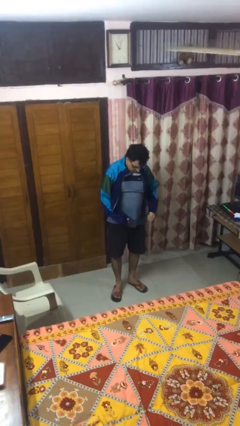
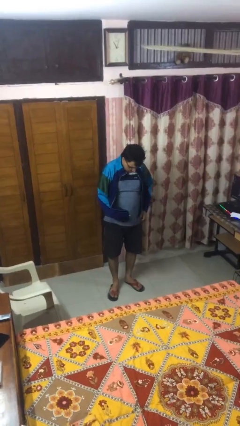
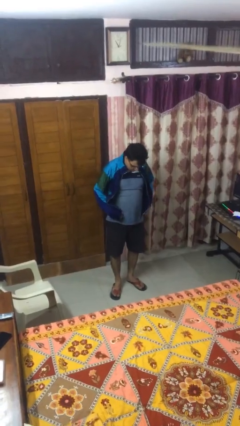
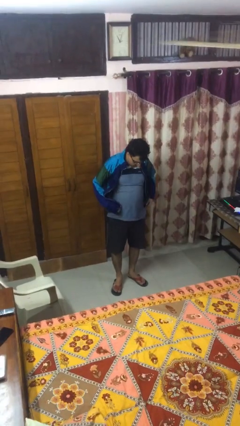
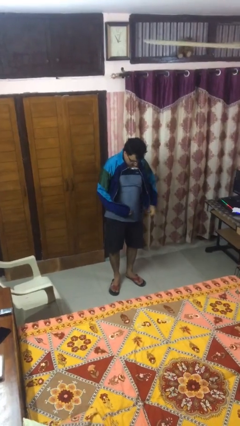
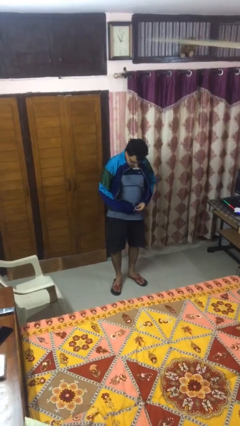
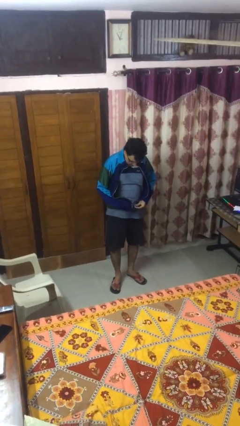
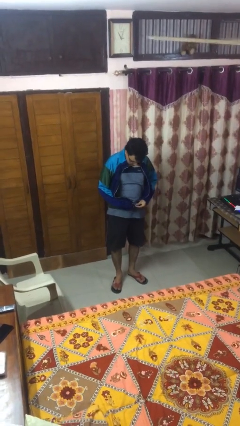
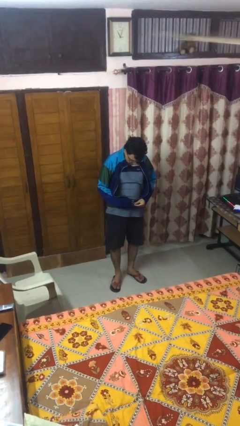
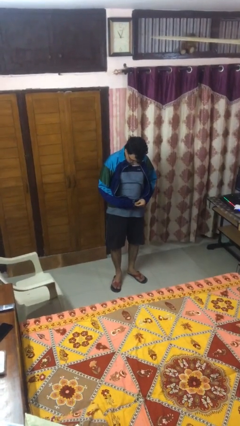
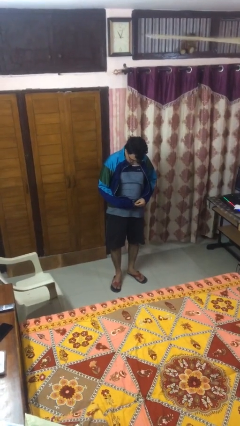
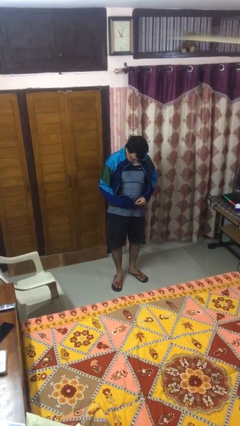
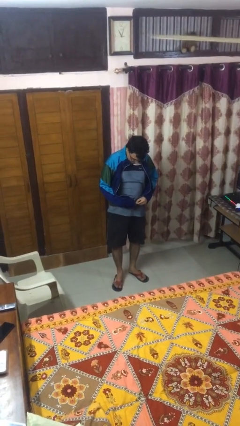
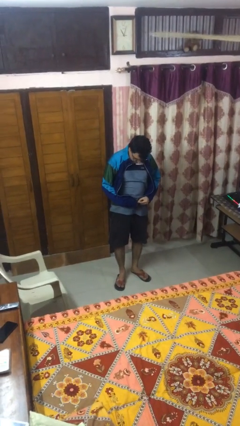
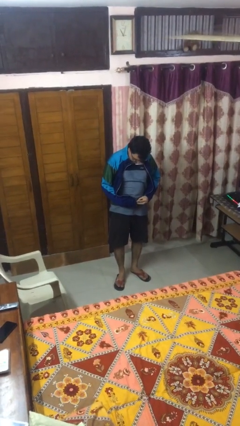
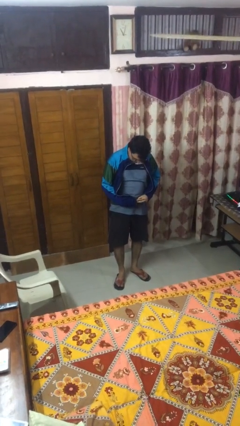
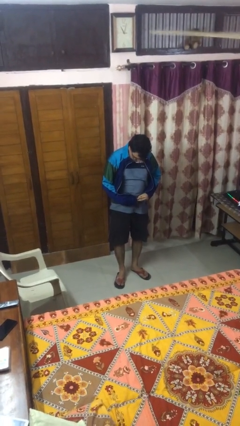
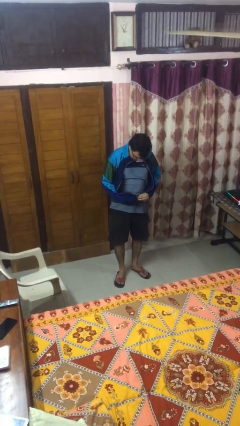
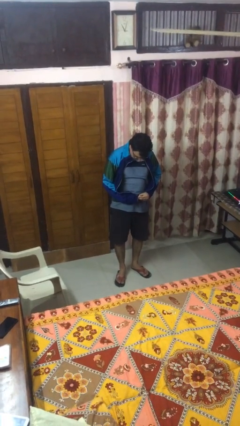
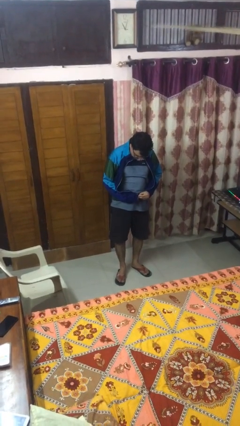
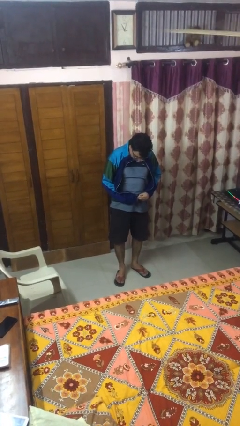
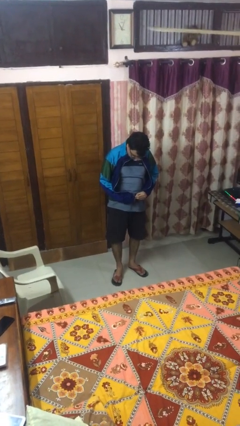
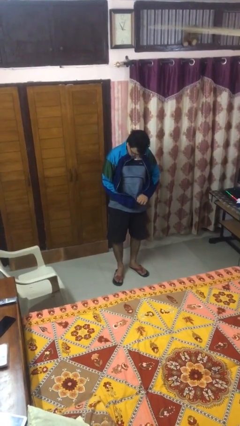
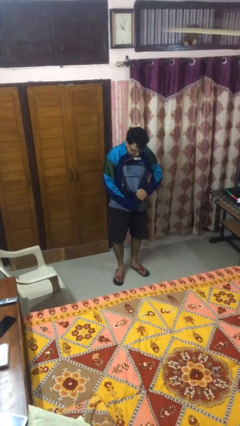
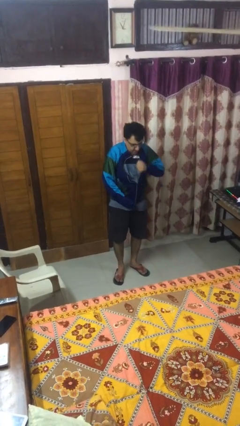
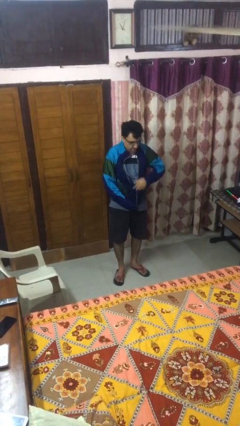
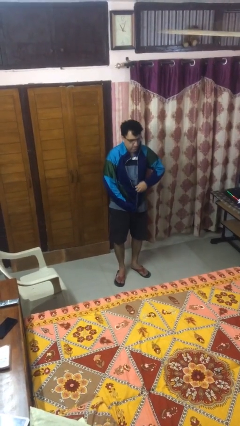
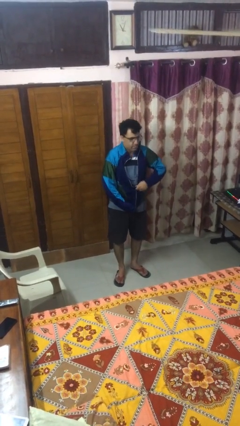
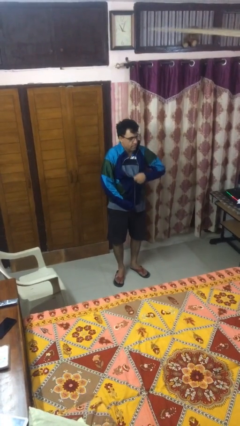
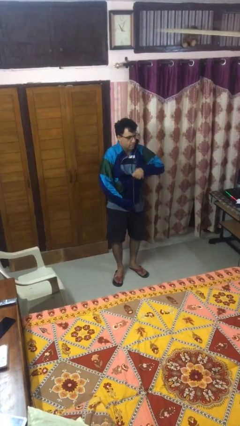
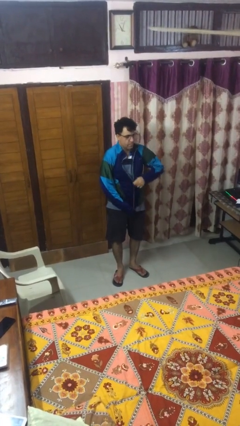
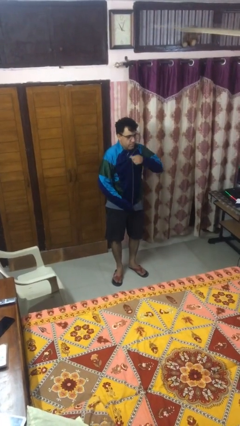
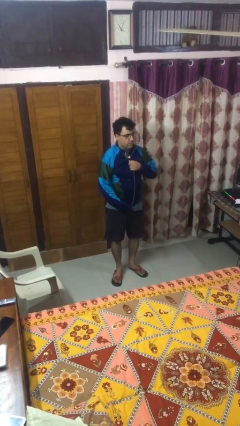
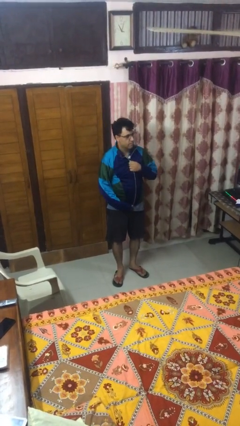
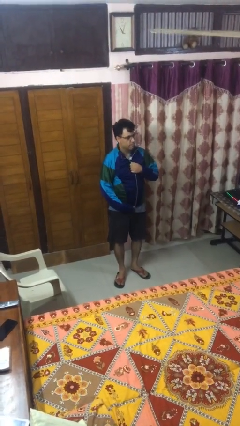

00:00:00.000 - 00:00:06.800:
person zips up jacket

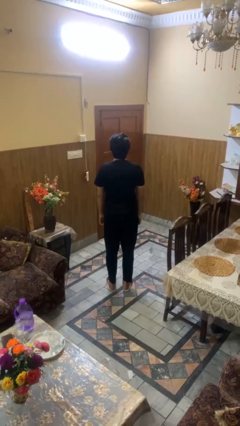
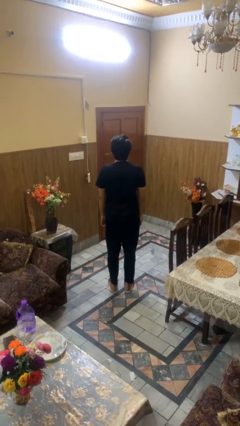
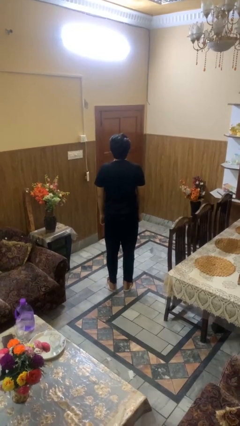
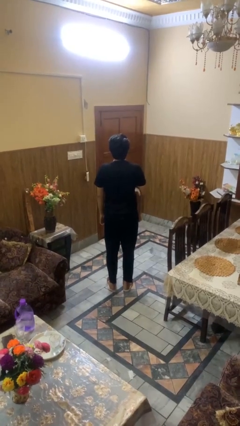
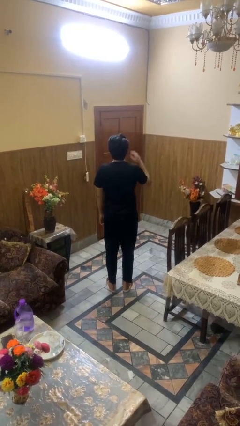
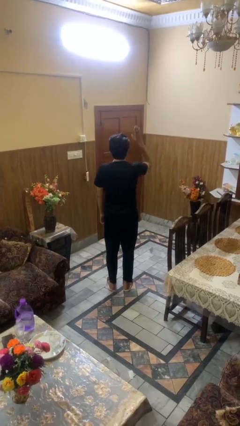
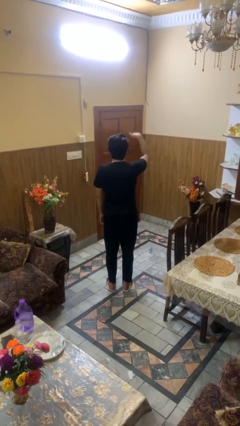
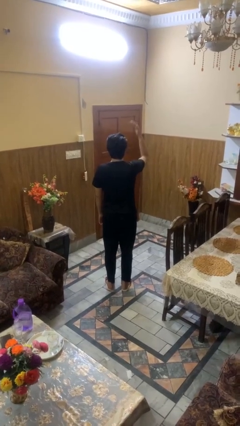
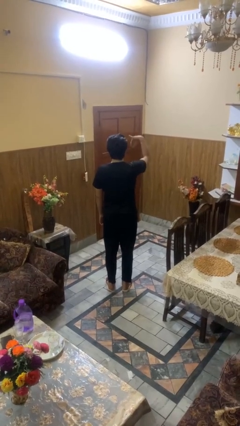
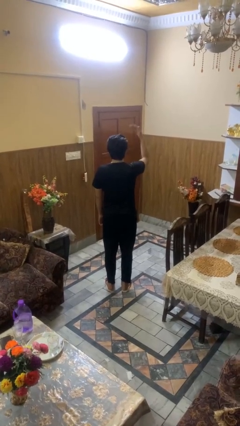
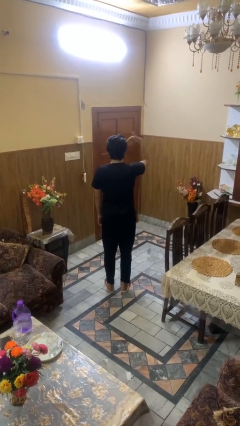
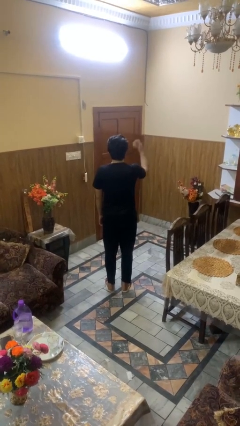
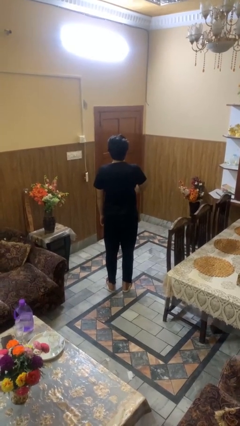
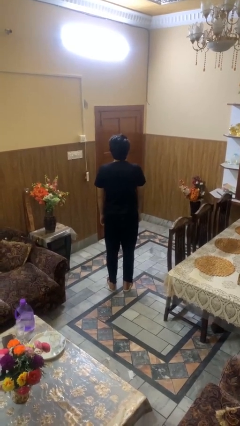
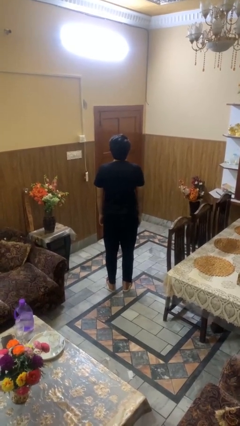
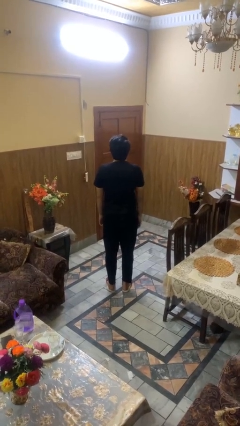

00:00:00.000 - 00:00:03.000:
person gestures come here

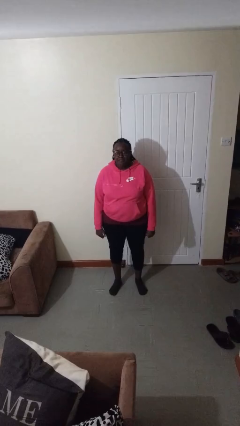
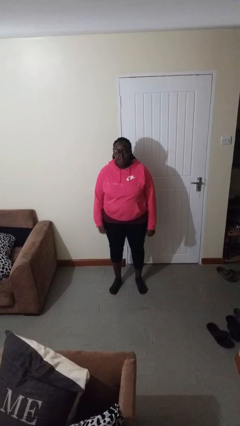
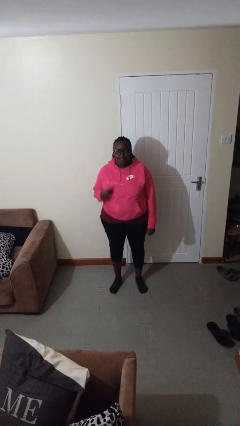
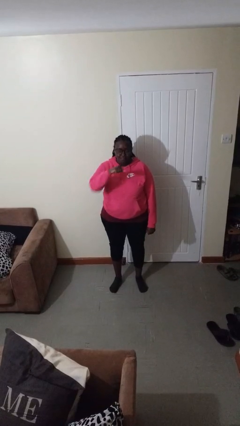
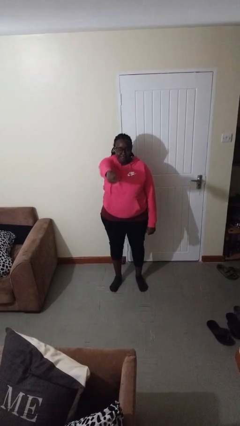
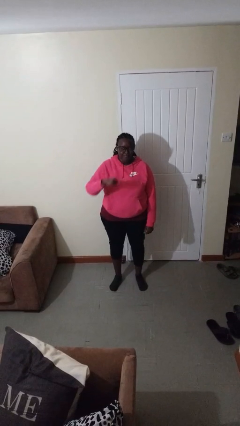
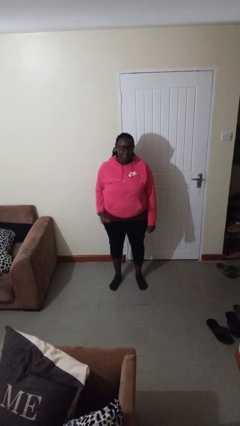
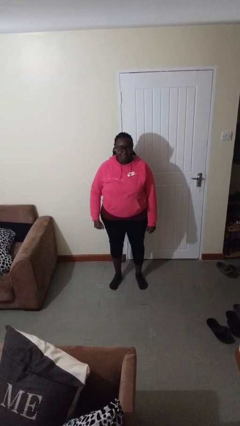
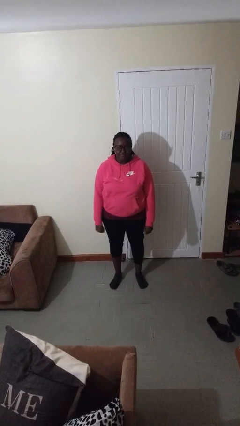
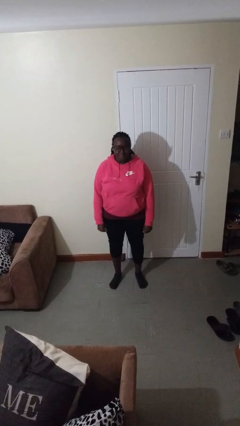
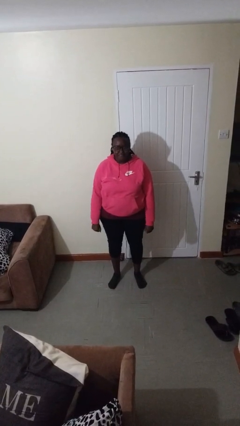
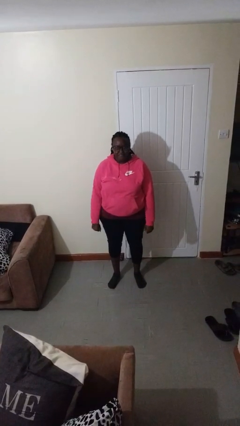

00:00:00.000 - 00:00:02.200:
person punches

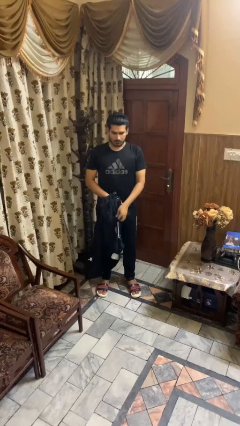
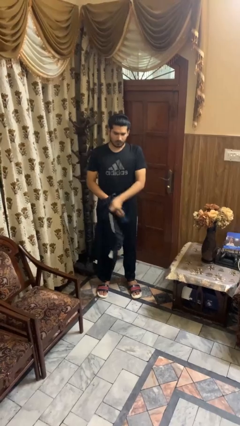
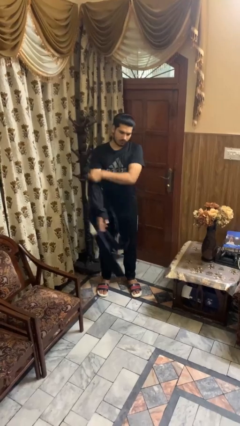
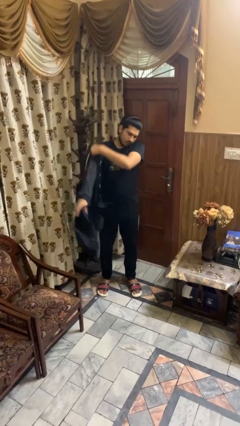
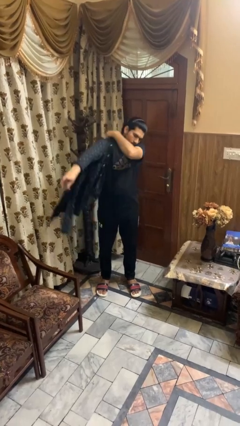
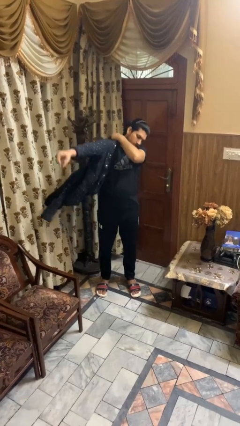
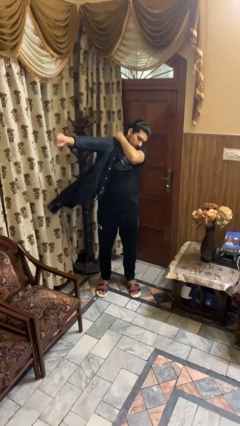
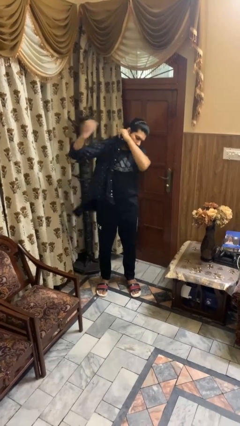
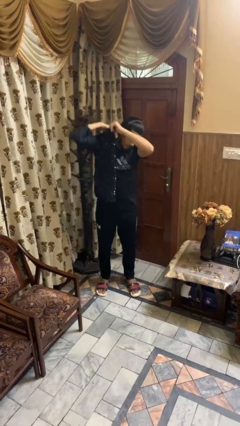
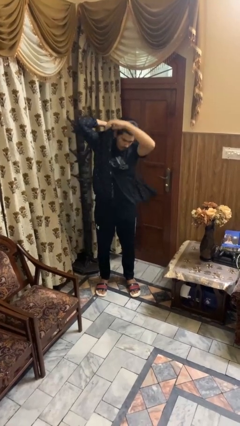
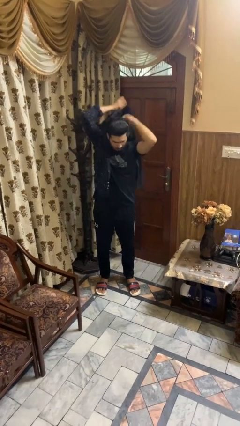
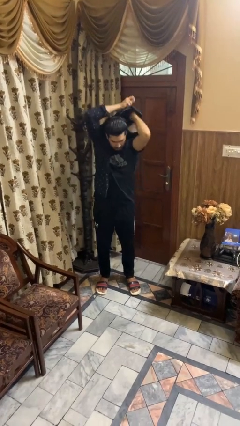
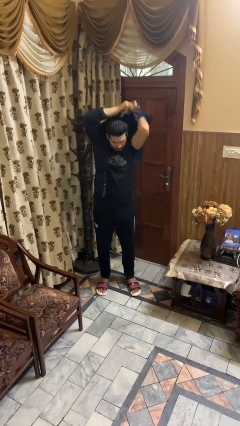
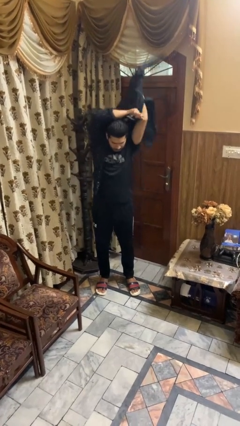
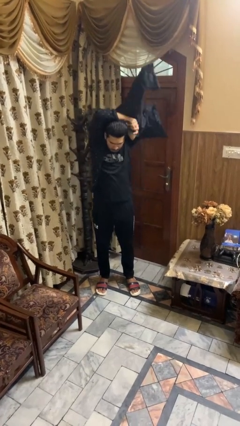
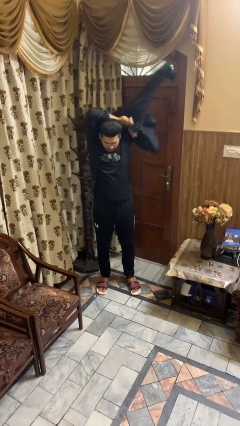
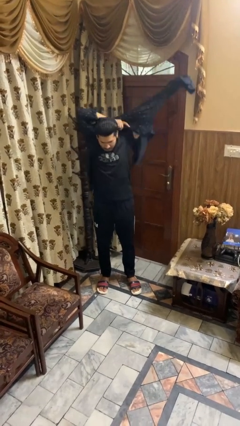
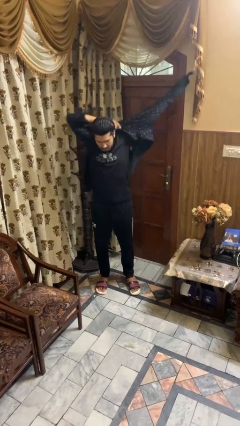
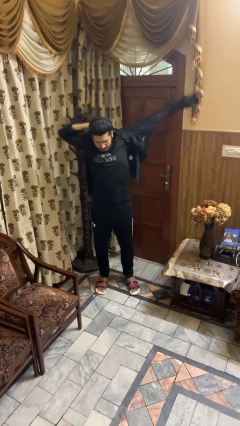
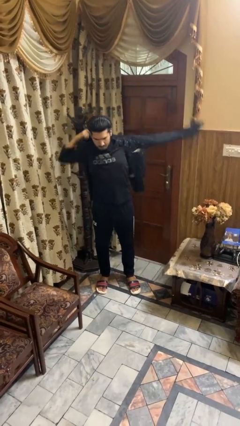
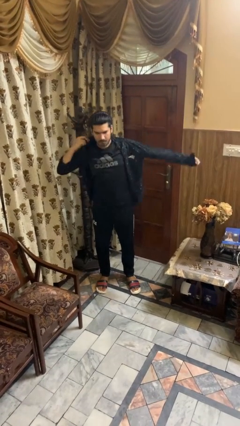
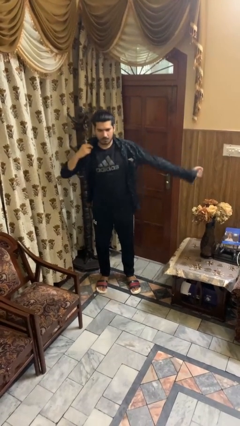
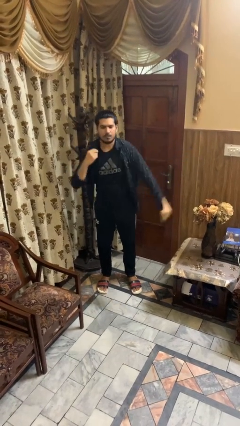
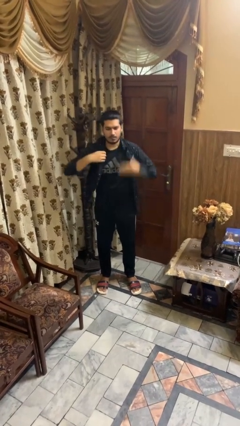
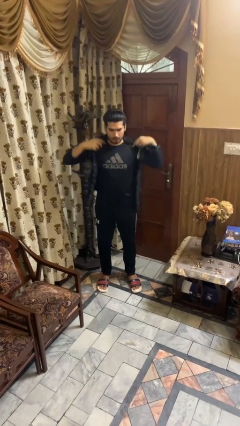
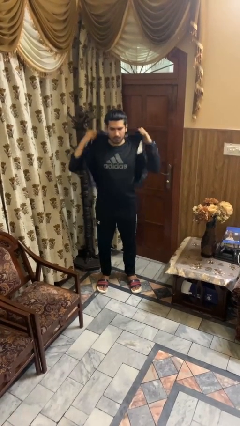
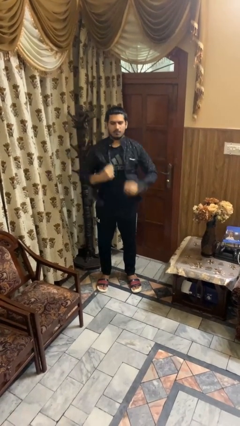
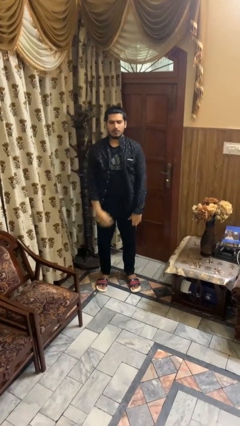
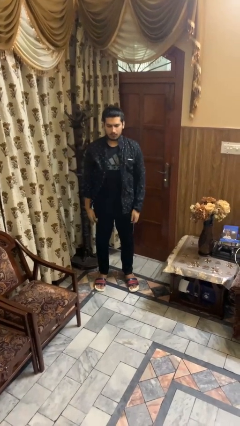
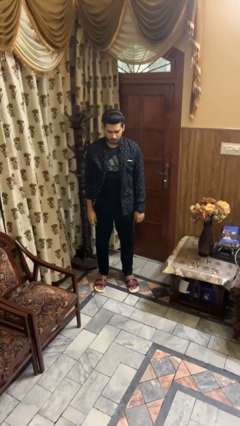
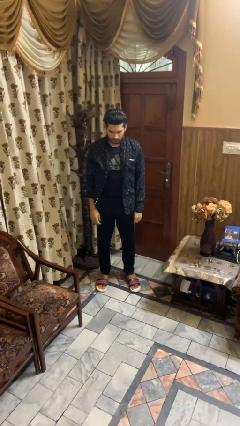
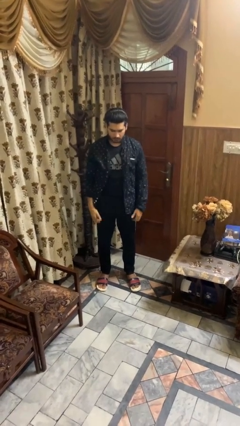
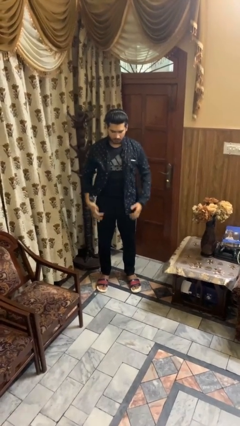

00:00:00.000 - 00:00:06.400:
person puts on shirt
